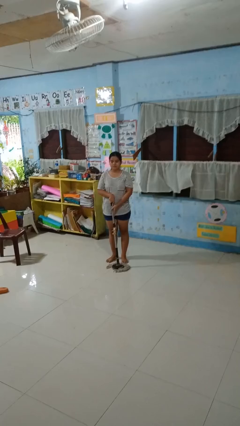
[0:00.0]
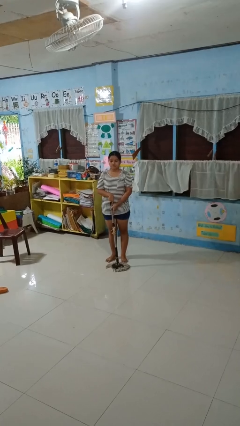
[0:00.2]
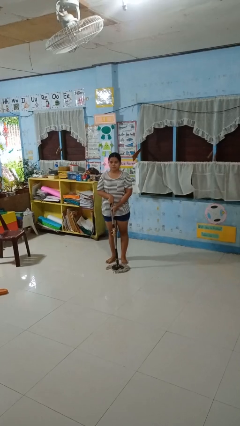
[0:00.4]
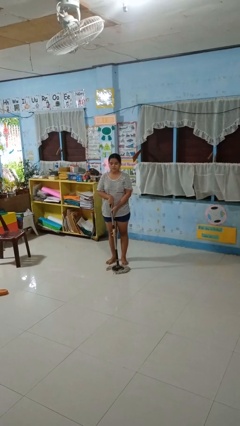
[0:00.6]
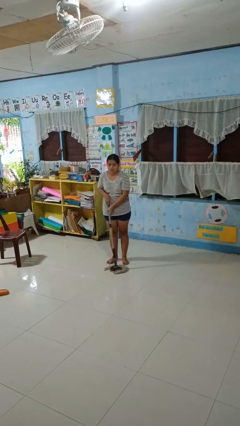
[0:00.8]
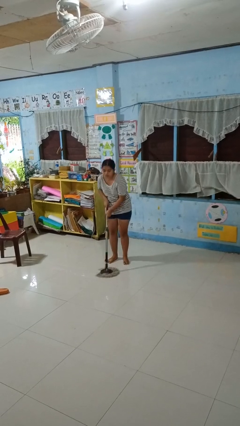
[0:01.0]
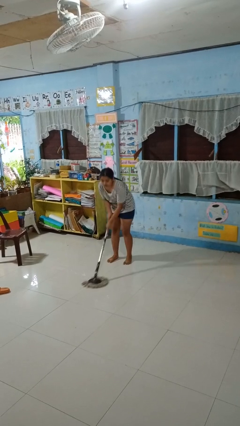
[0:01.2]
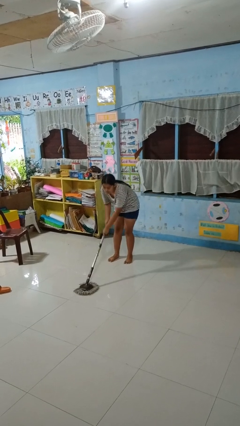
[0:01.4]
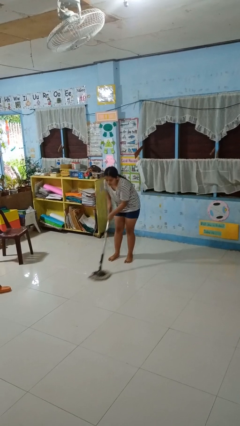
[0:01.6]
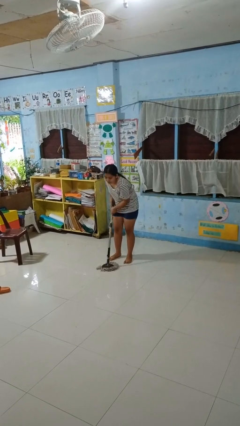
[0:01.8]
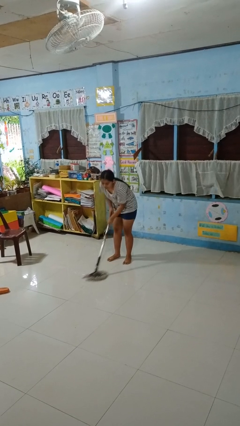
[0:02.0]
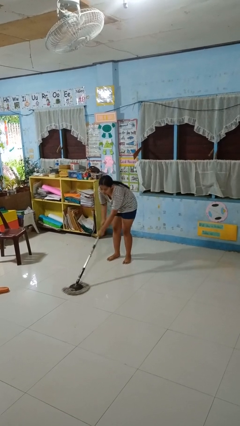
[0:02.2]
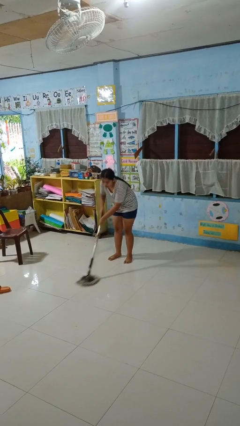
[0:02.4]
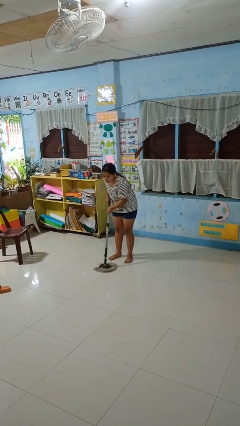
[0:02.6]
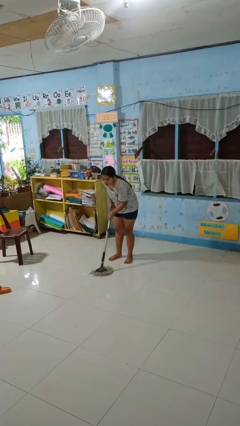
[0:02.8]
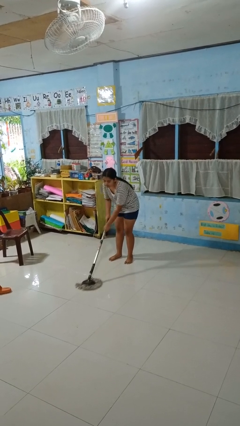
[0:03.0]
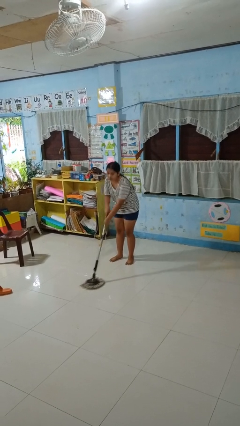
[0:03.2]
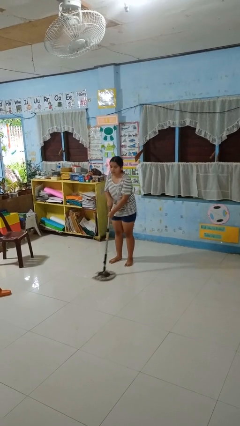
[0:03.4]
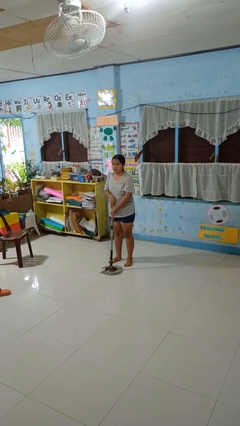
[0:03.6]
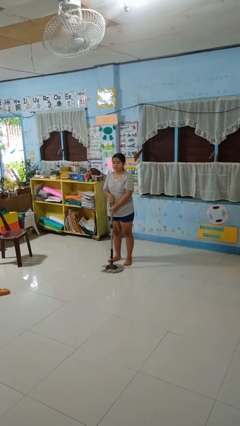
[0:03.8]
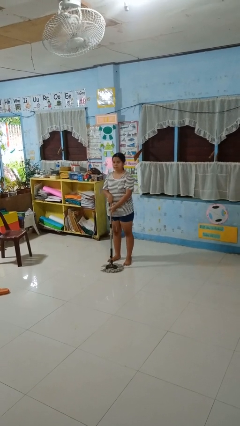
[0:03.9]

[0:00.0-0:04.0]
person mops

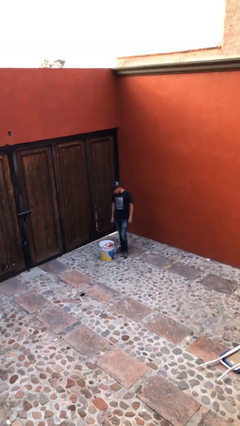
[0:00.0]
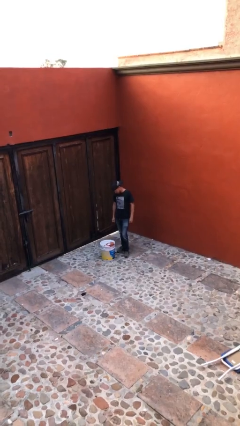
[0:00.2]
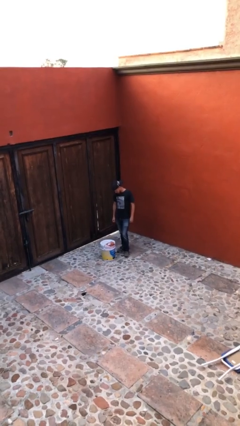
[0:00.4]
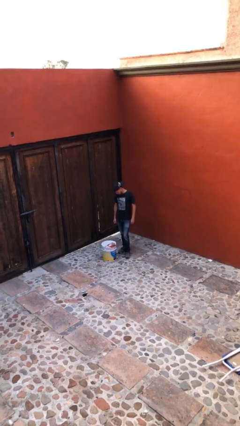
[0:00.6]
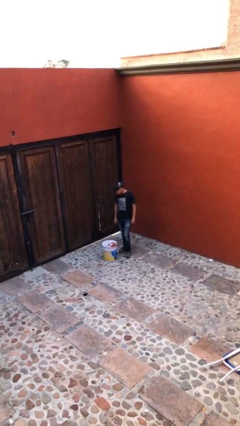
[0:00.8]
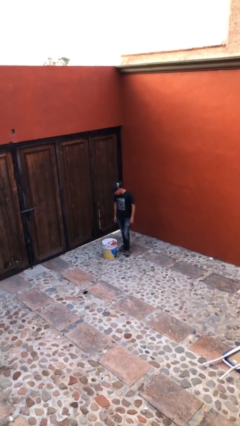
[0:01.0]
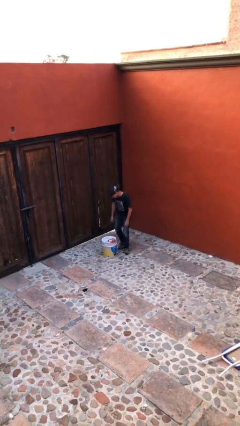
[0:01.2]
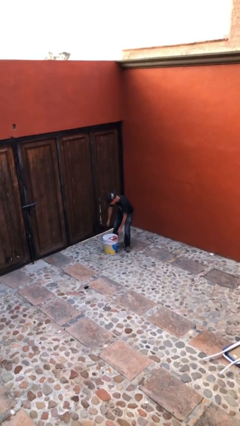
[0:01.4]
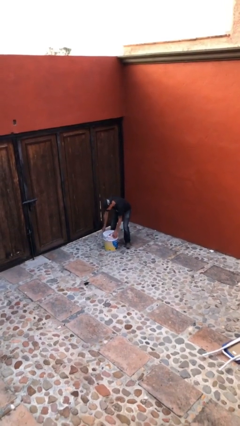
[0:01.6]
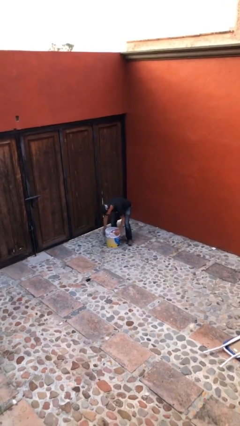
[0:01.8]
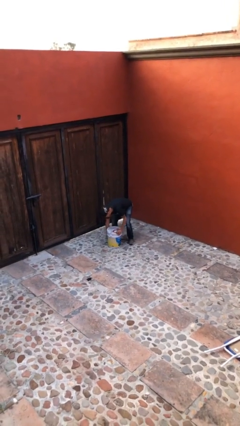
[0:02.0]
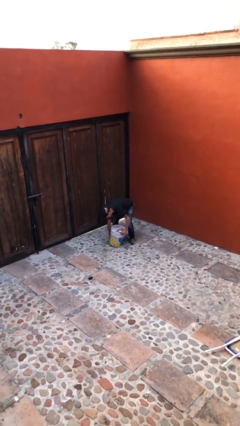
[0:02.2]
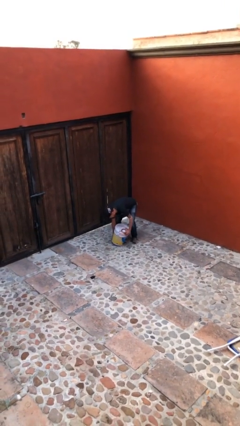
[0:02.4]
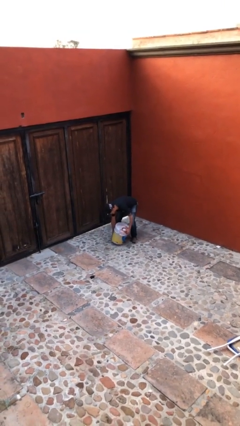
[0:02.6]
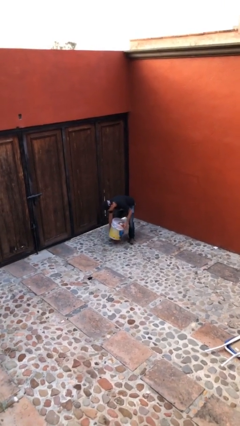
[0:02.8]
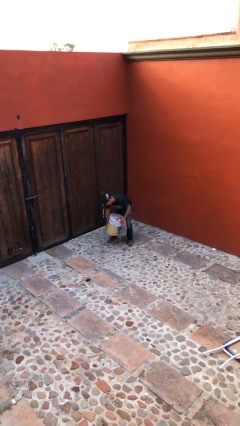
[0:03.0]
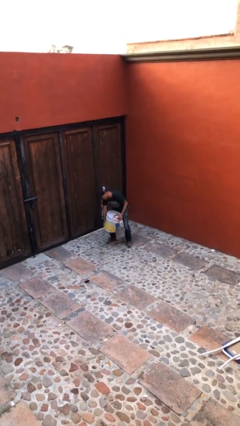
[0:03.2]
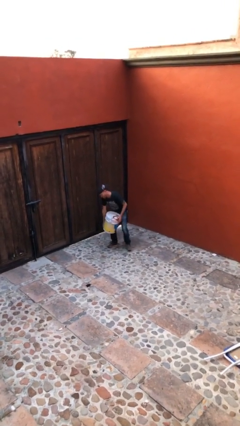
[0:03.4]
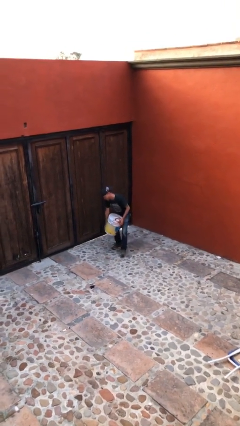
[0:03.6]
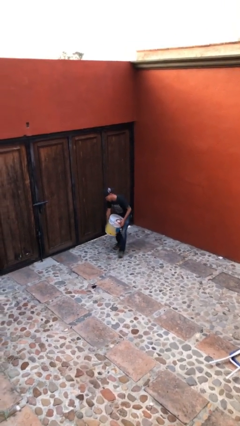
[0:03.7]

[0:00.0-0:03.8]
person picks up object from floor

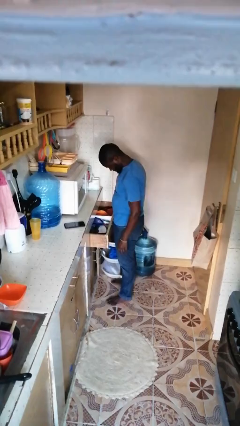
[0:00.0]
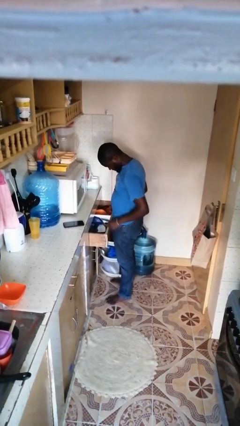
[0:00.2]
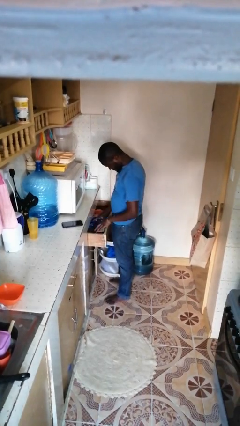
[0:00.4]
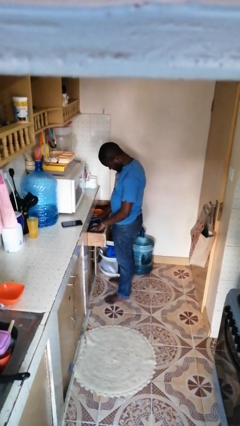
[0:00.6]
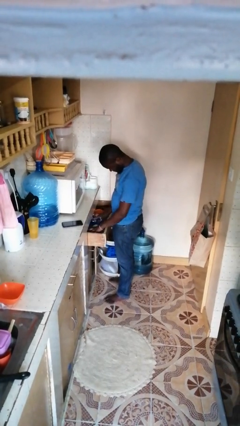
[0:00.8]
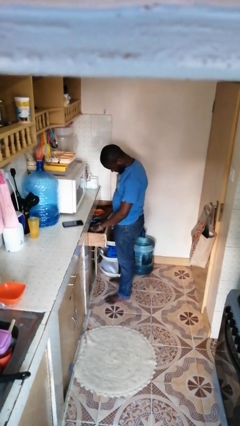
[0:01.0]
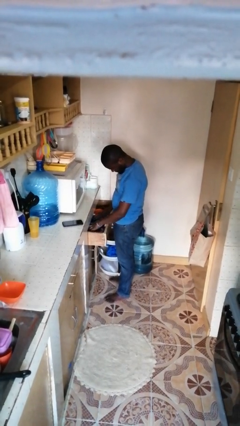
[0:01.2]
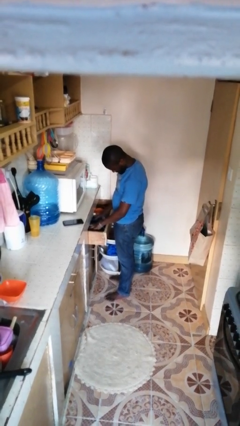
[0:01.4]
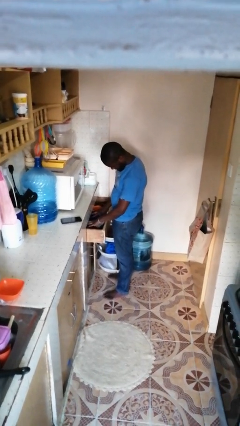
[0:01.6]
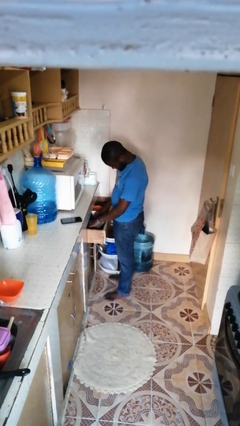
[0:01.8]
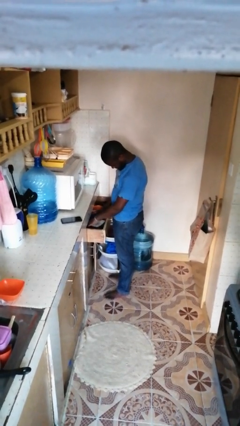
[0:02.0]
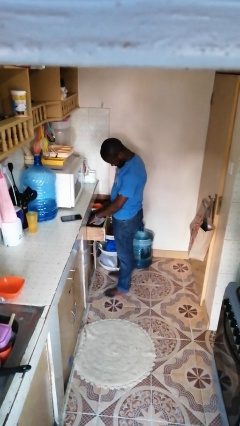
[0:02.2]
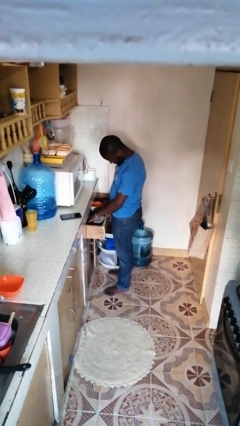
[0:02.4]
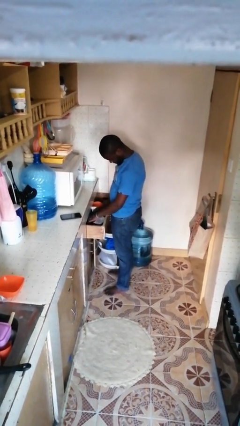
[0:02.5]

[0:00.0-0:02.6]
person searches in kitchen drawer

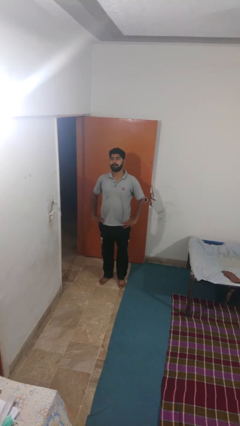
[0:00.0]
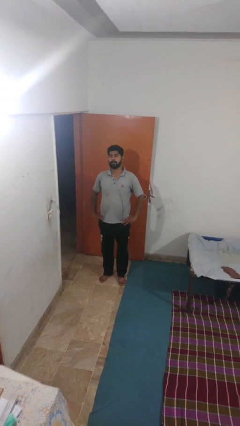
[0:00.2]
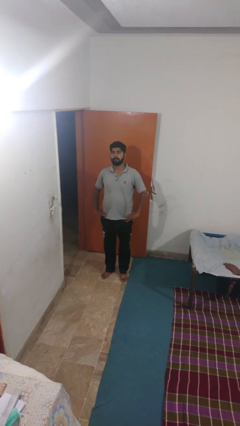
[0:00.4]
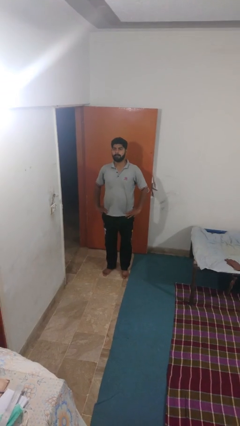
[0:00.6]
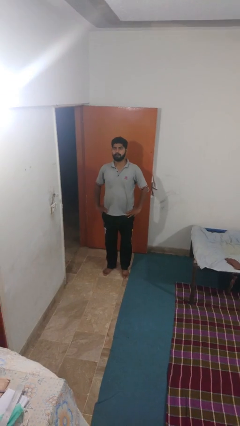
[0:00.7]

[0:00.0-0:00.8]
person stands up

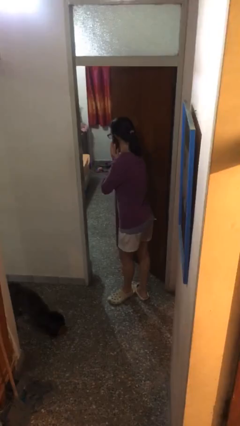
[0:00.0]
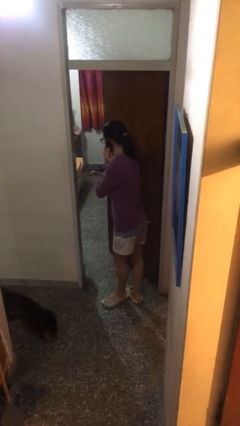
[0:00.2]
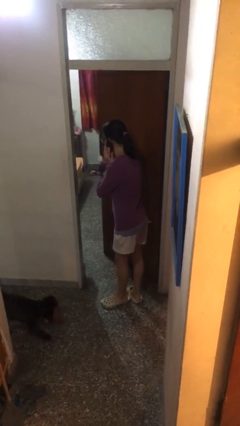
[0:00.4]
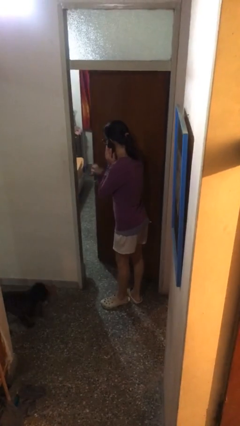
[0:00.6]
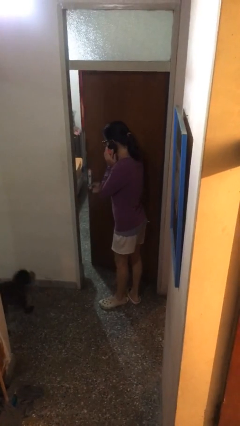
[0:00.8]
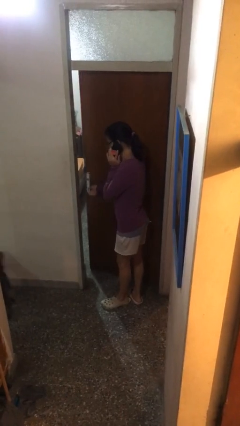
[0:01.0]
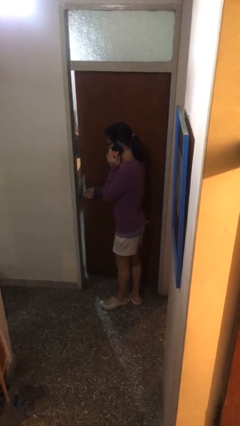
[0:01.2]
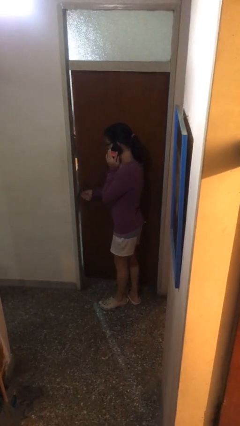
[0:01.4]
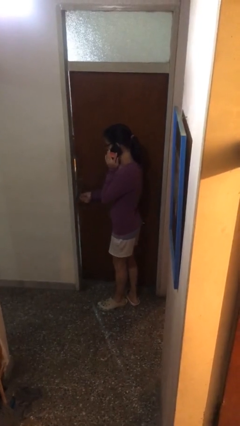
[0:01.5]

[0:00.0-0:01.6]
person closes facility door

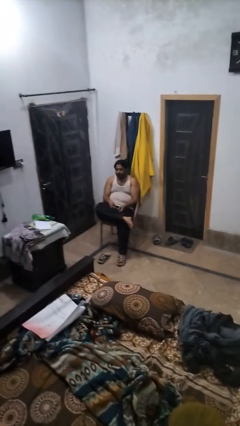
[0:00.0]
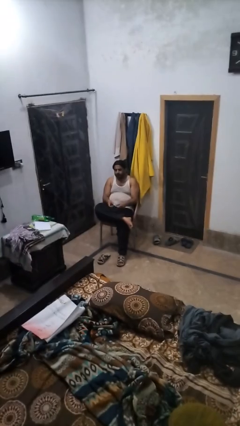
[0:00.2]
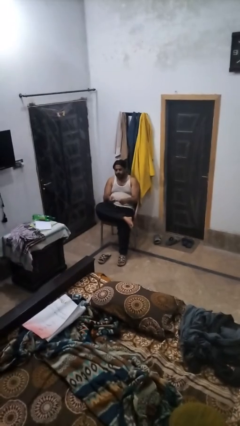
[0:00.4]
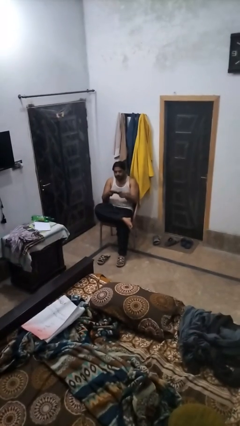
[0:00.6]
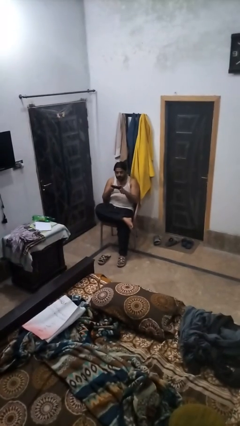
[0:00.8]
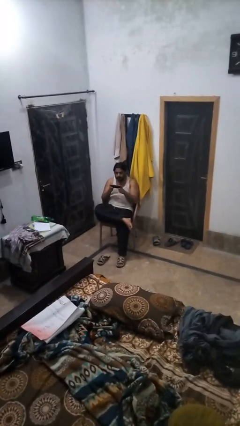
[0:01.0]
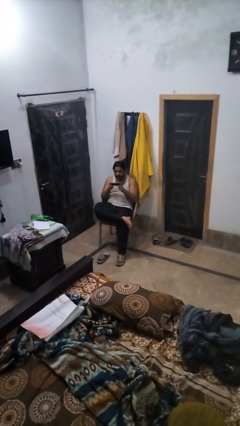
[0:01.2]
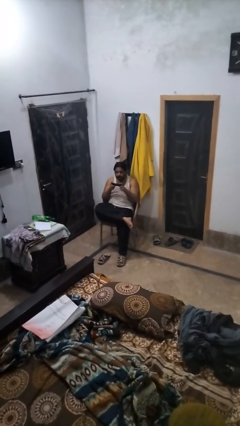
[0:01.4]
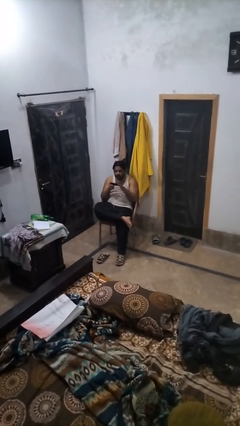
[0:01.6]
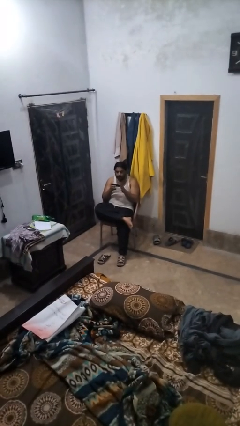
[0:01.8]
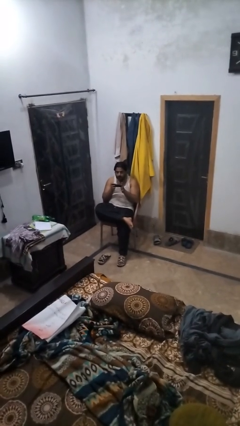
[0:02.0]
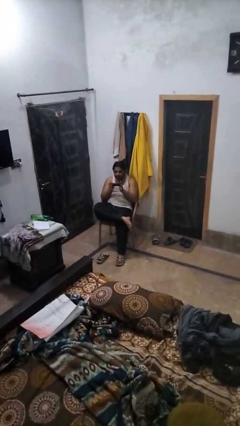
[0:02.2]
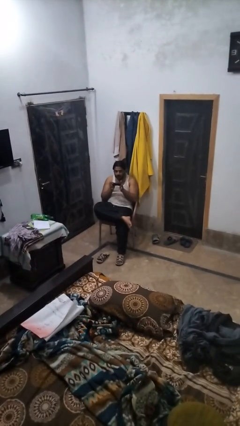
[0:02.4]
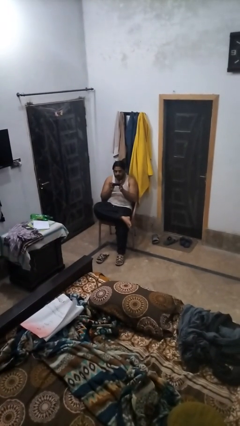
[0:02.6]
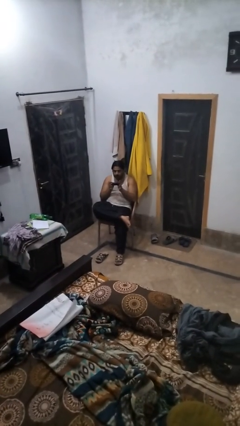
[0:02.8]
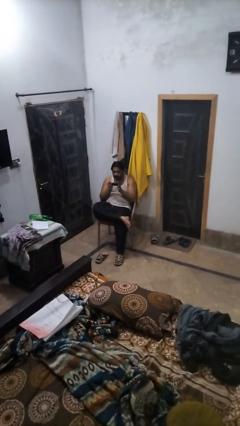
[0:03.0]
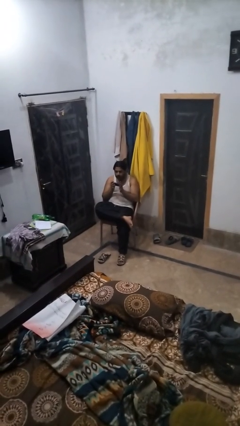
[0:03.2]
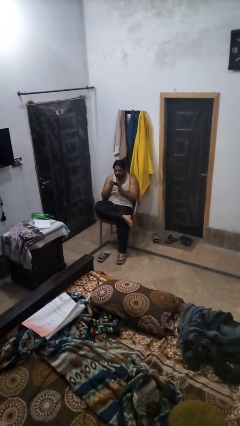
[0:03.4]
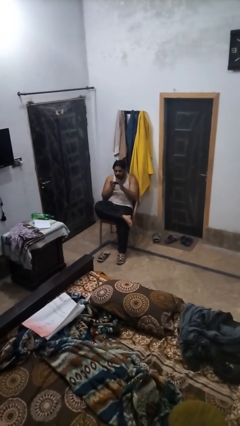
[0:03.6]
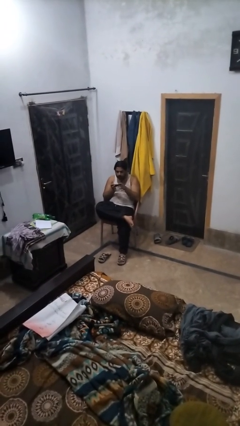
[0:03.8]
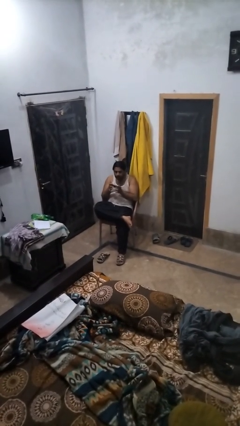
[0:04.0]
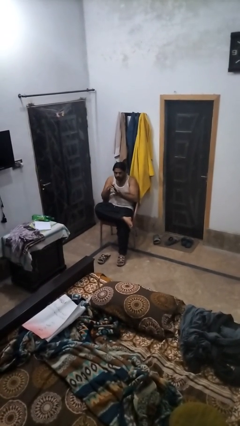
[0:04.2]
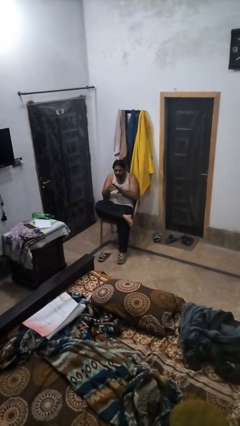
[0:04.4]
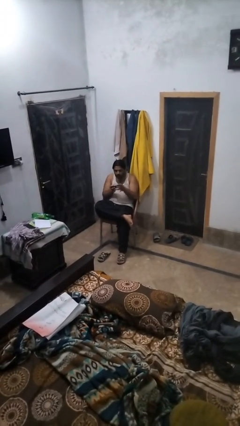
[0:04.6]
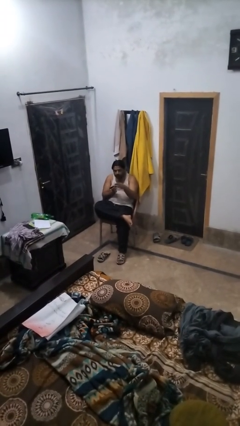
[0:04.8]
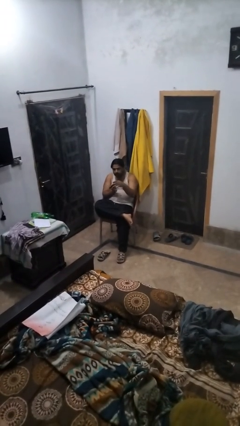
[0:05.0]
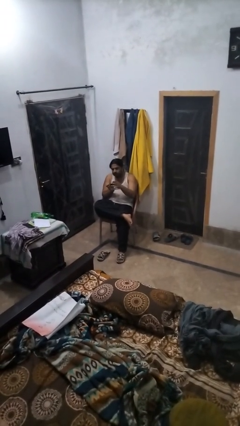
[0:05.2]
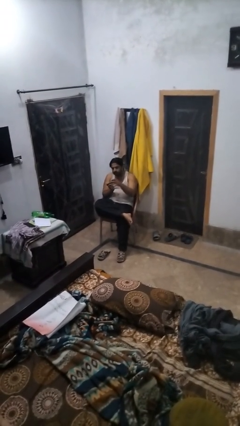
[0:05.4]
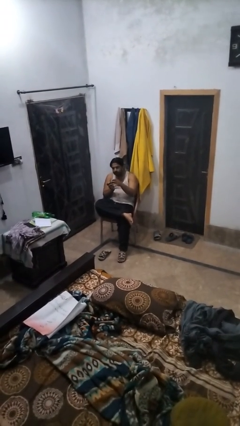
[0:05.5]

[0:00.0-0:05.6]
person interacts with handheld game
